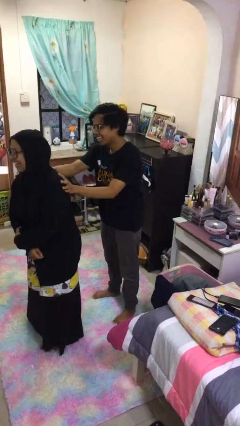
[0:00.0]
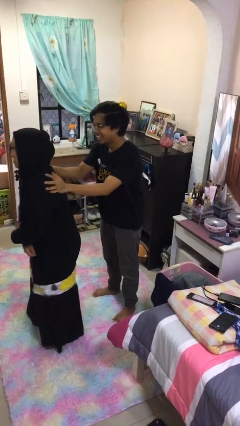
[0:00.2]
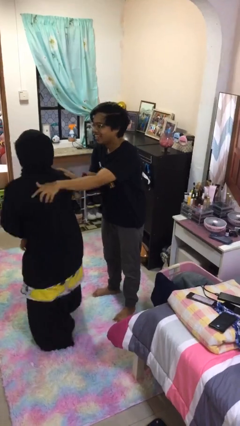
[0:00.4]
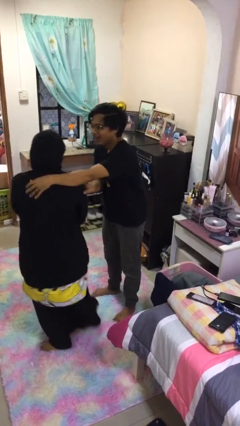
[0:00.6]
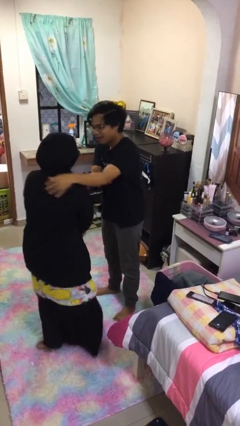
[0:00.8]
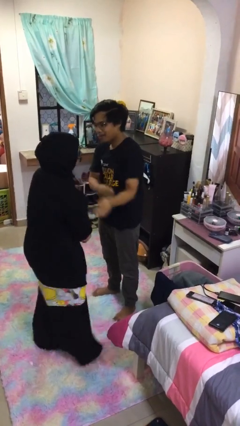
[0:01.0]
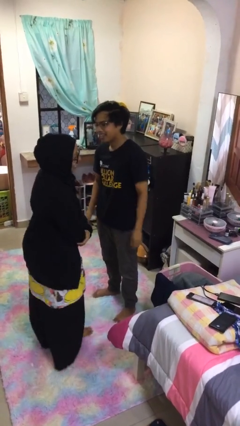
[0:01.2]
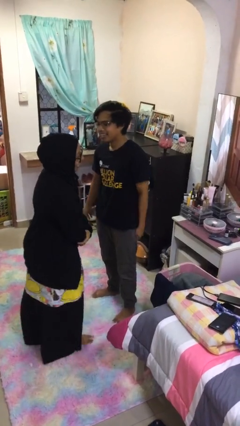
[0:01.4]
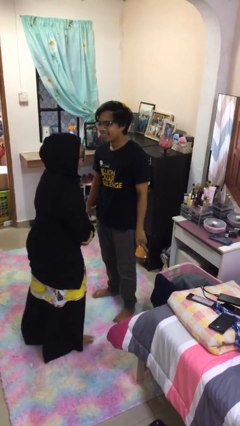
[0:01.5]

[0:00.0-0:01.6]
person spins person around

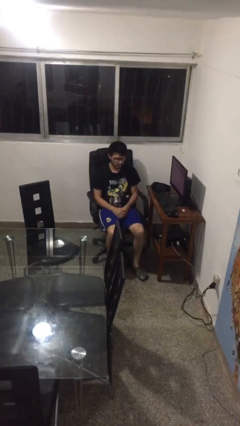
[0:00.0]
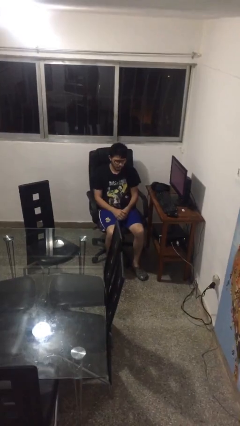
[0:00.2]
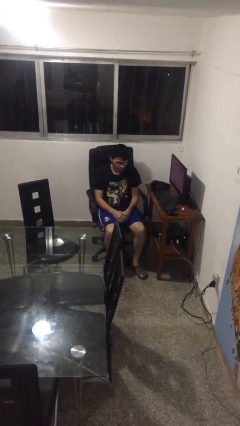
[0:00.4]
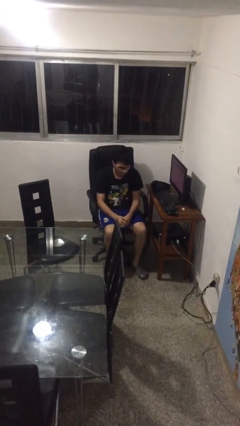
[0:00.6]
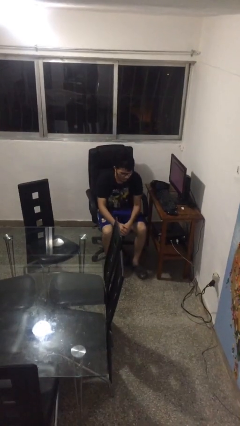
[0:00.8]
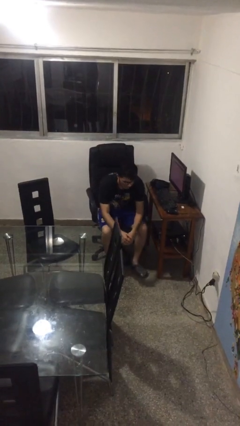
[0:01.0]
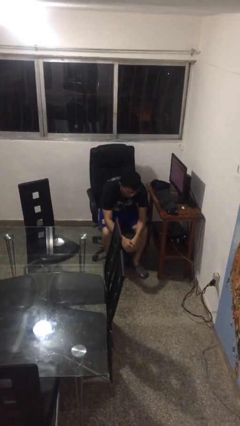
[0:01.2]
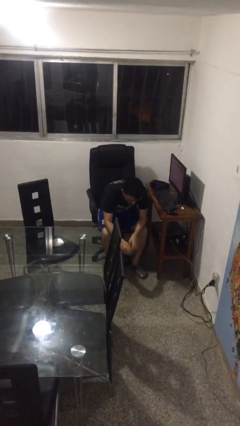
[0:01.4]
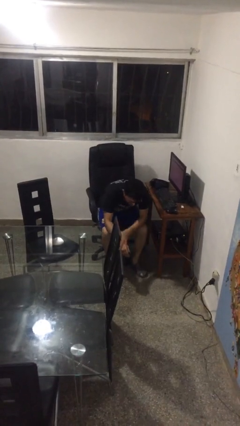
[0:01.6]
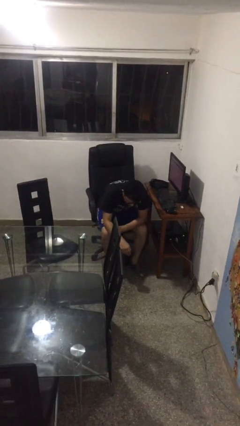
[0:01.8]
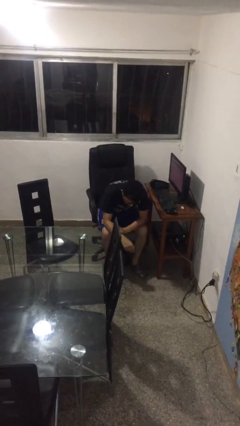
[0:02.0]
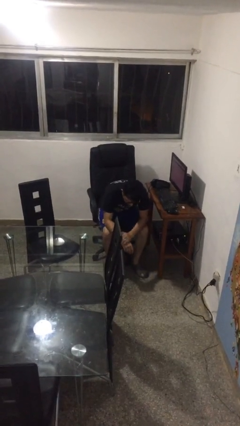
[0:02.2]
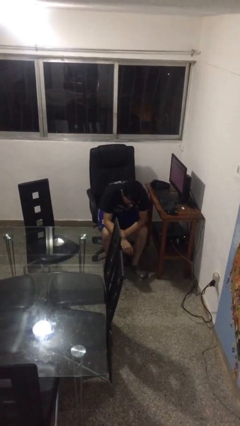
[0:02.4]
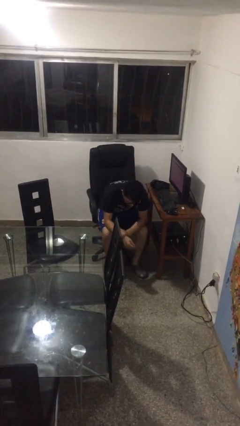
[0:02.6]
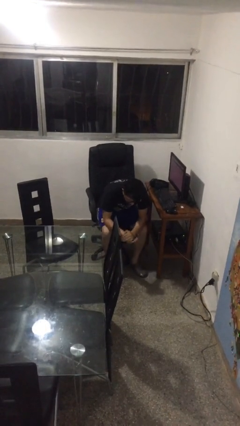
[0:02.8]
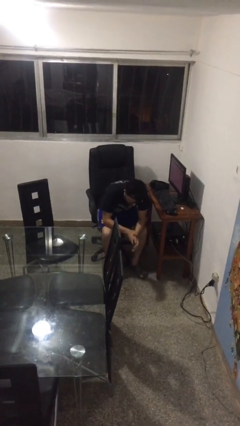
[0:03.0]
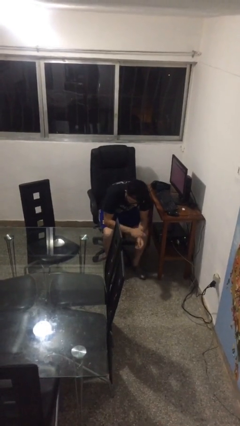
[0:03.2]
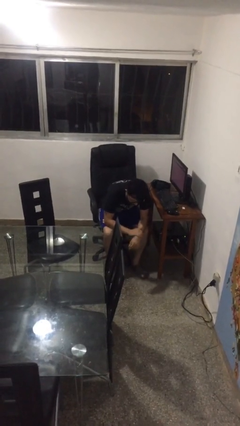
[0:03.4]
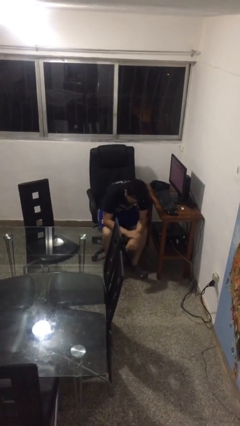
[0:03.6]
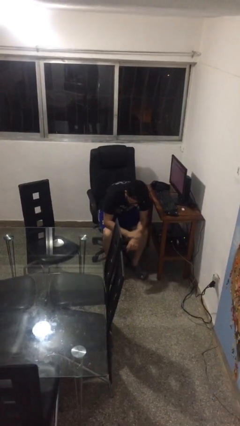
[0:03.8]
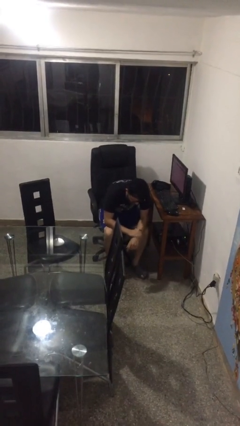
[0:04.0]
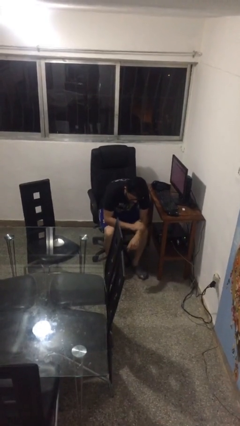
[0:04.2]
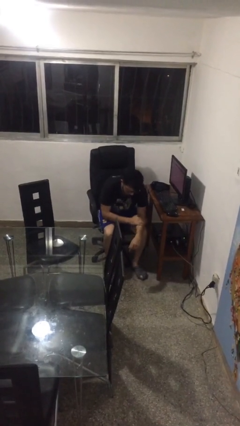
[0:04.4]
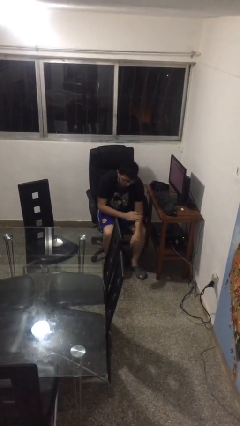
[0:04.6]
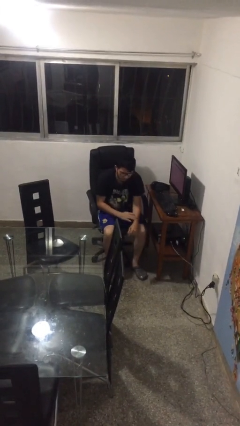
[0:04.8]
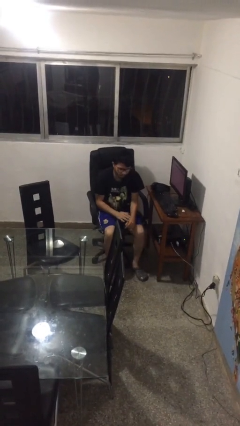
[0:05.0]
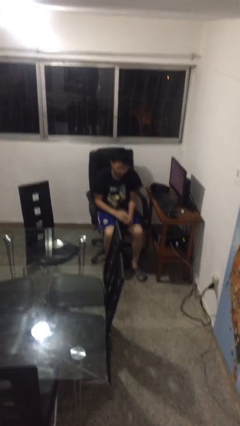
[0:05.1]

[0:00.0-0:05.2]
person looks at hands in lap

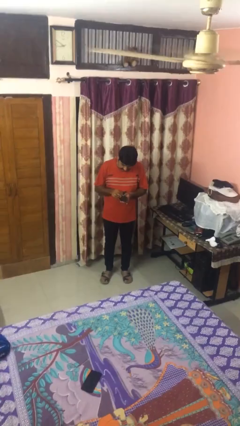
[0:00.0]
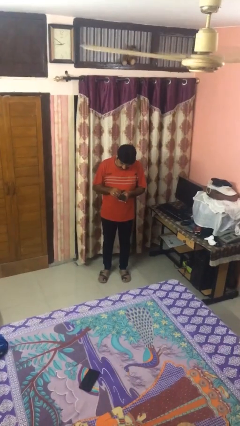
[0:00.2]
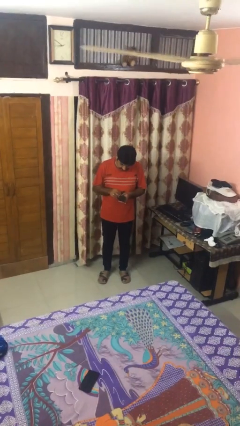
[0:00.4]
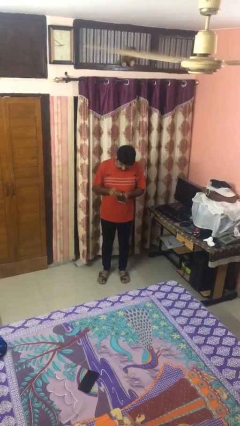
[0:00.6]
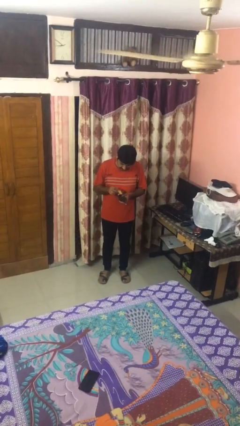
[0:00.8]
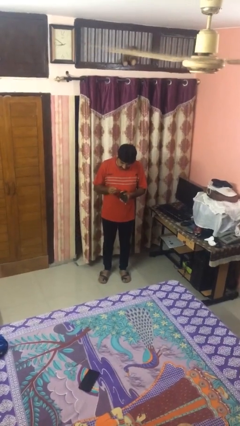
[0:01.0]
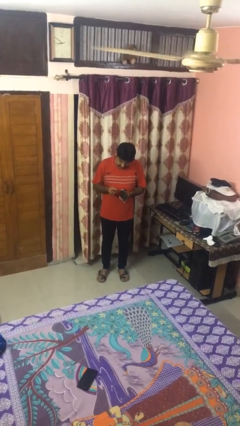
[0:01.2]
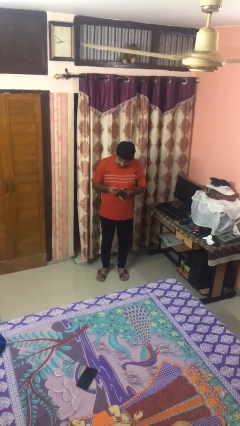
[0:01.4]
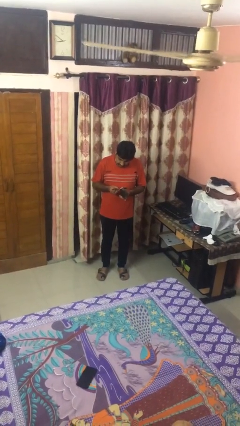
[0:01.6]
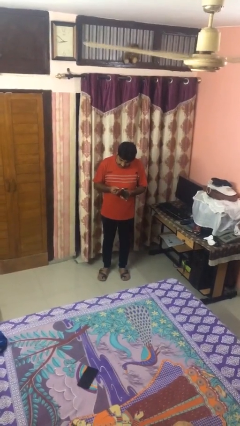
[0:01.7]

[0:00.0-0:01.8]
person takes object from purse

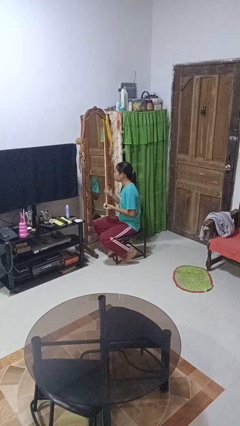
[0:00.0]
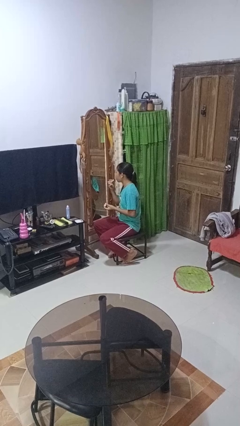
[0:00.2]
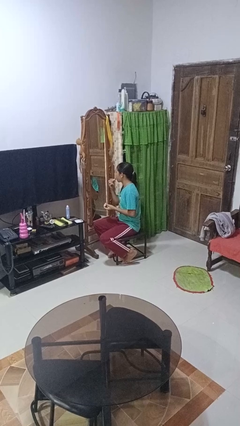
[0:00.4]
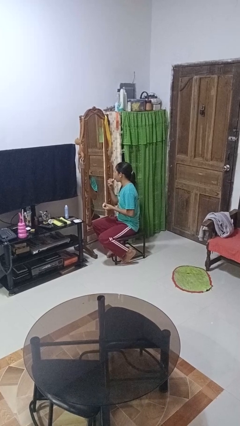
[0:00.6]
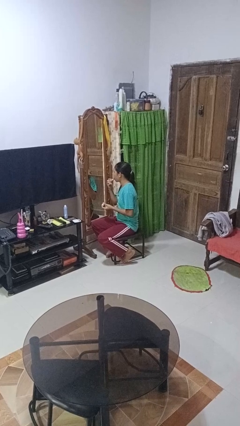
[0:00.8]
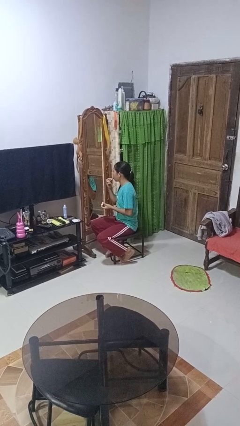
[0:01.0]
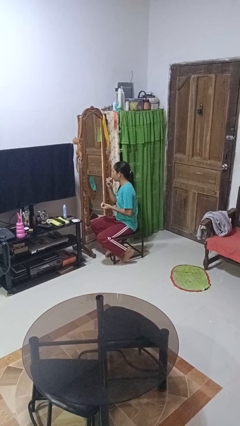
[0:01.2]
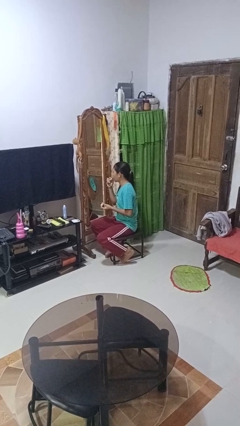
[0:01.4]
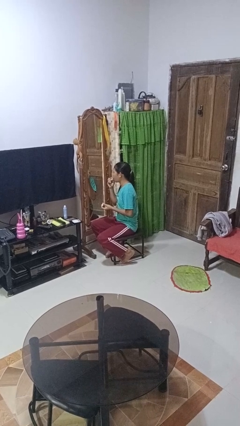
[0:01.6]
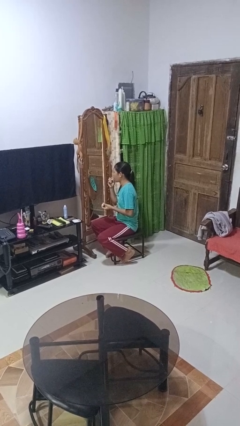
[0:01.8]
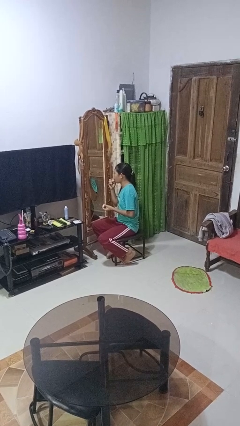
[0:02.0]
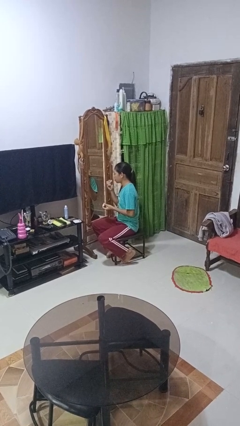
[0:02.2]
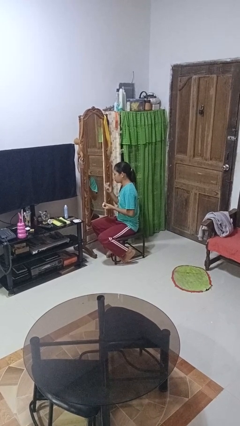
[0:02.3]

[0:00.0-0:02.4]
person applies lip makeup

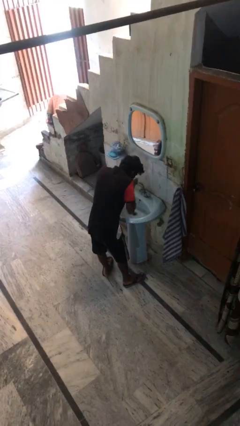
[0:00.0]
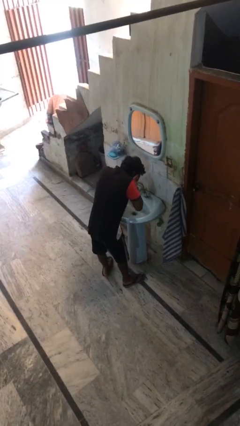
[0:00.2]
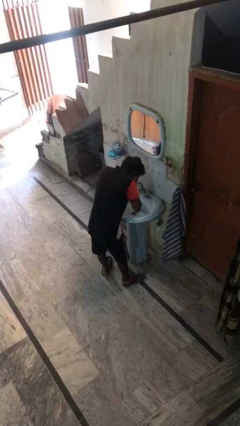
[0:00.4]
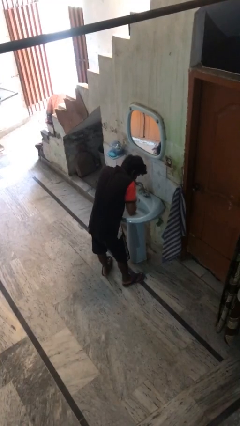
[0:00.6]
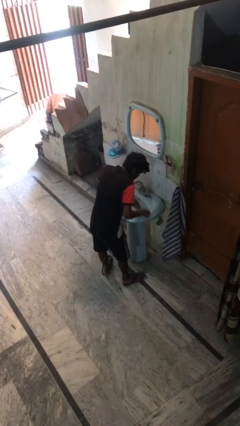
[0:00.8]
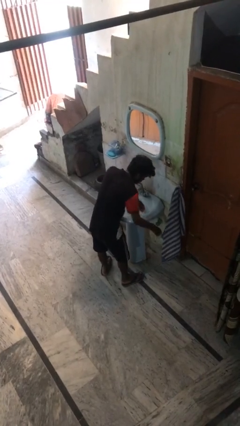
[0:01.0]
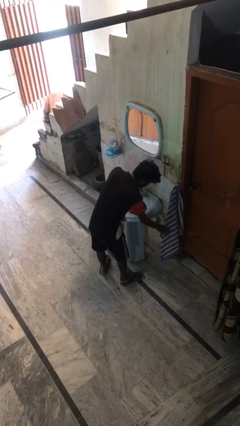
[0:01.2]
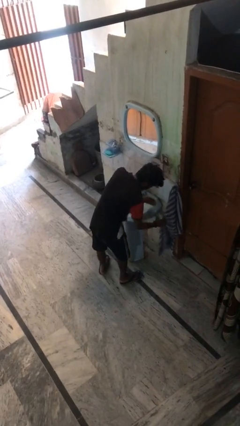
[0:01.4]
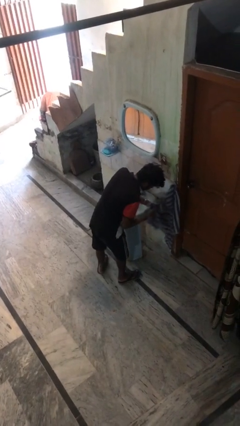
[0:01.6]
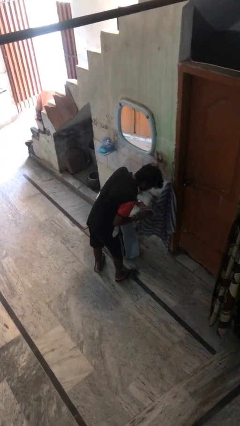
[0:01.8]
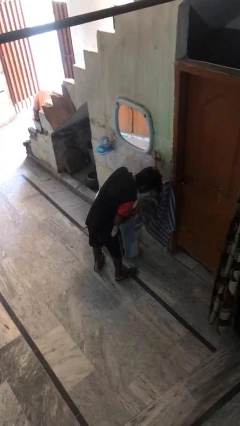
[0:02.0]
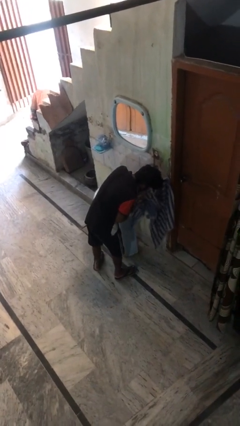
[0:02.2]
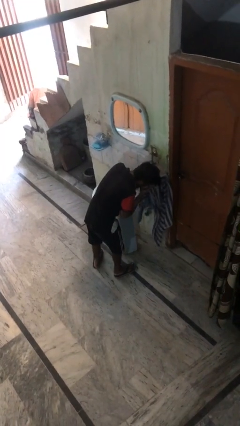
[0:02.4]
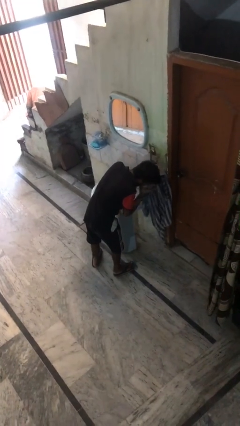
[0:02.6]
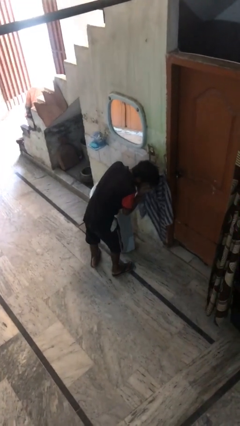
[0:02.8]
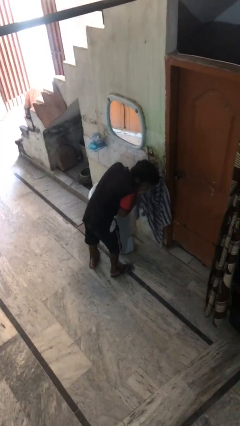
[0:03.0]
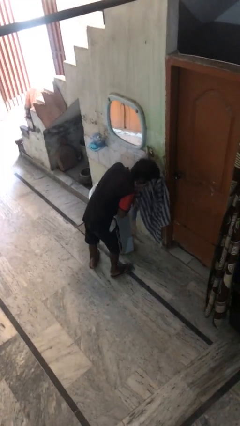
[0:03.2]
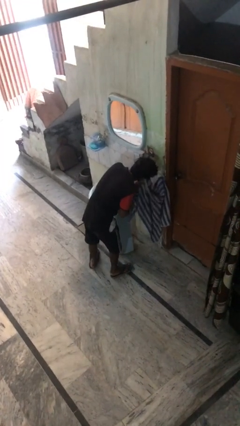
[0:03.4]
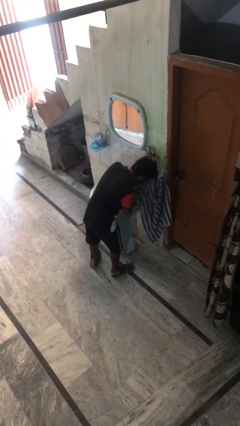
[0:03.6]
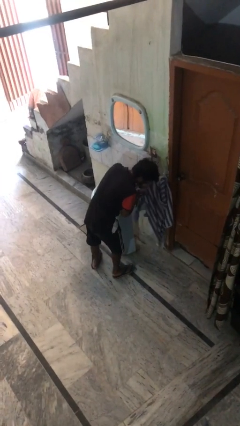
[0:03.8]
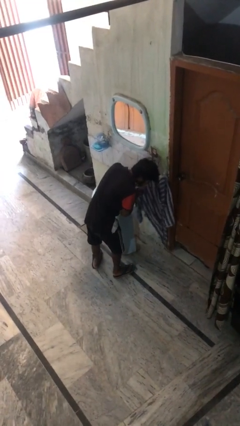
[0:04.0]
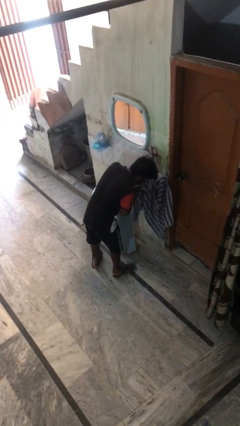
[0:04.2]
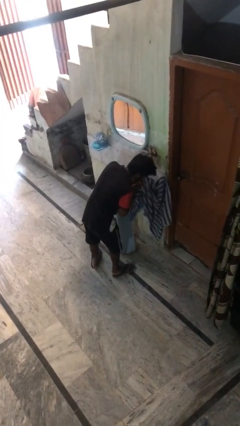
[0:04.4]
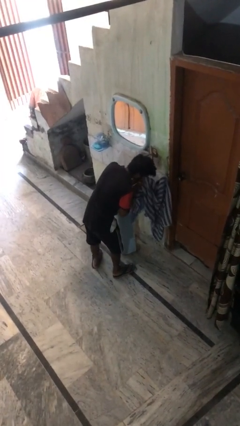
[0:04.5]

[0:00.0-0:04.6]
person dries face with towel

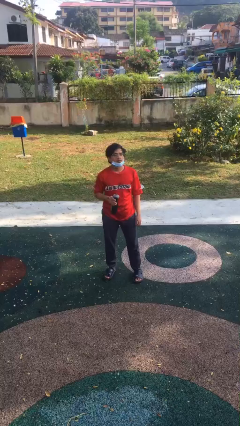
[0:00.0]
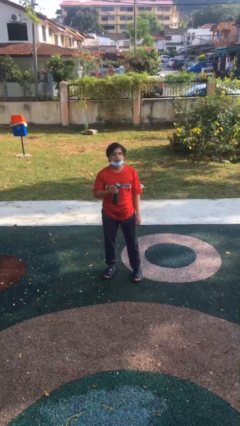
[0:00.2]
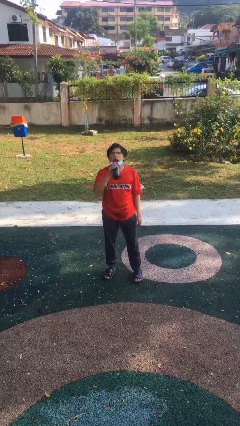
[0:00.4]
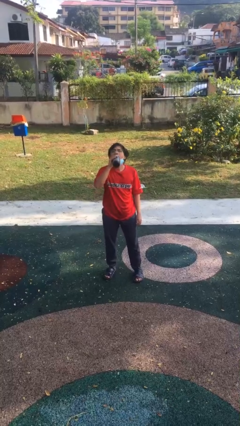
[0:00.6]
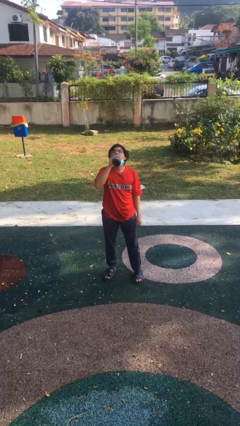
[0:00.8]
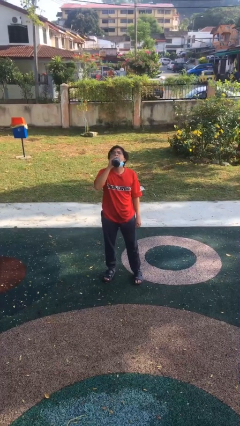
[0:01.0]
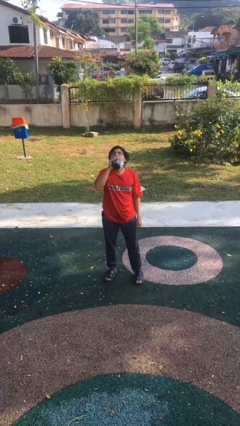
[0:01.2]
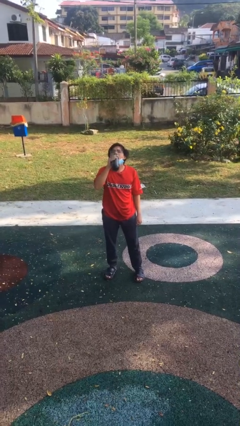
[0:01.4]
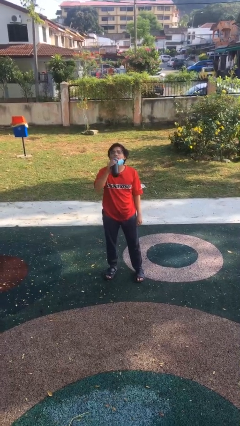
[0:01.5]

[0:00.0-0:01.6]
person drinks from bottle
